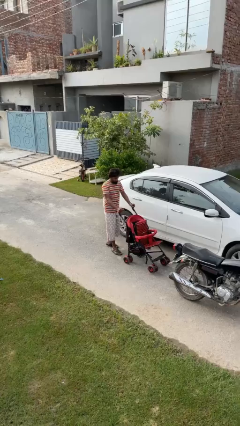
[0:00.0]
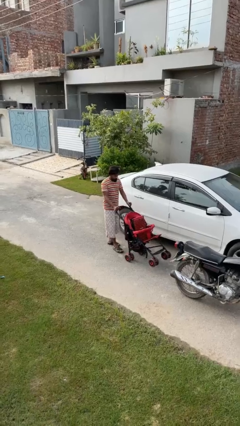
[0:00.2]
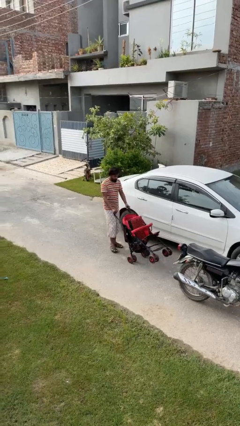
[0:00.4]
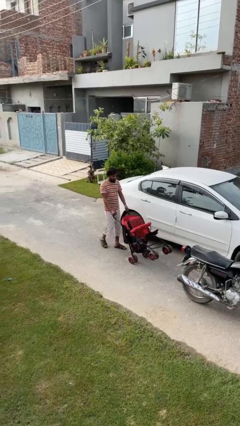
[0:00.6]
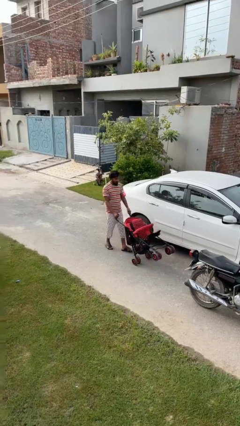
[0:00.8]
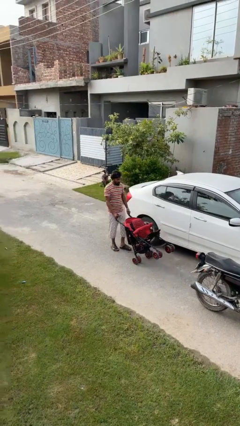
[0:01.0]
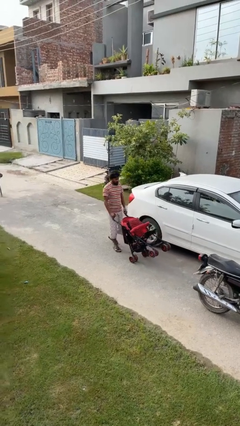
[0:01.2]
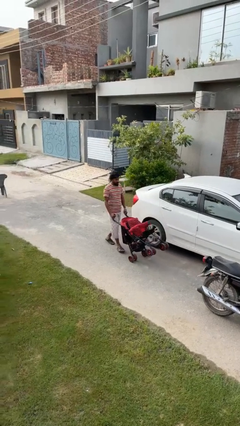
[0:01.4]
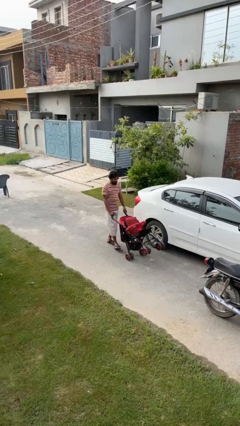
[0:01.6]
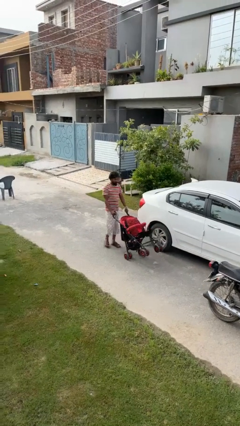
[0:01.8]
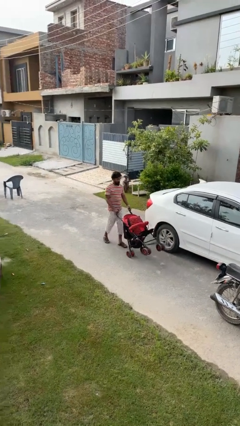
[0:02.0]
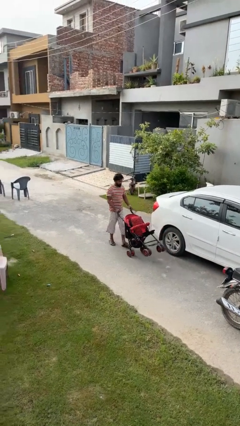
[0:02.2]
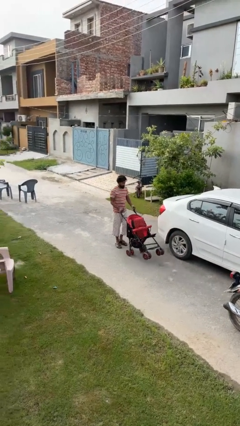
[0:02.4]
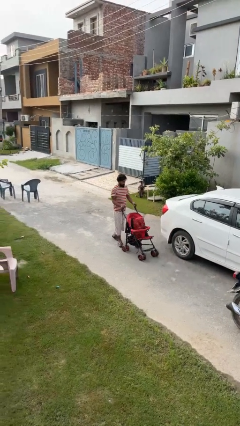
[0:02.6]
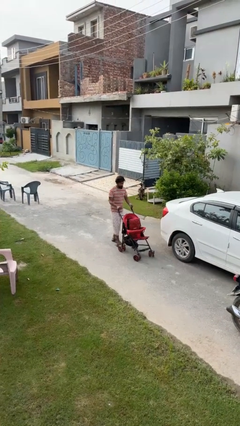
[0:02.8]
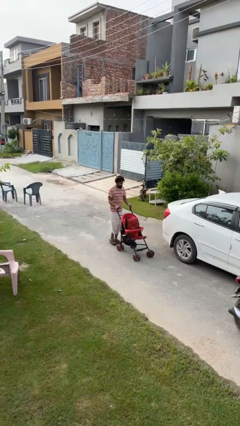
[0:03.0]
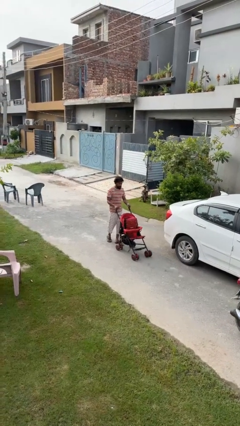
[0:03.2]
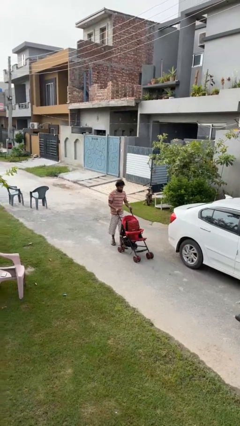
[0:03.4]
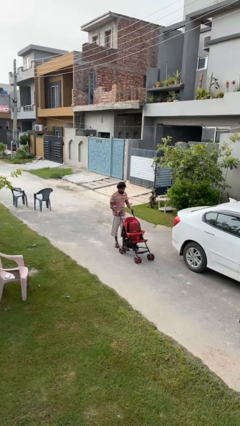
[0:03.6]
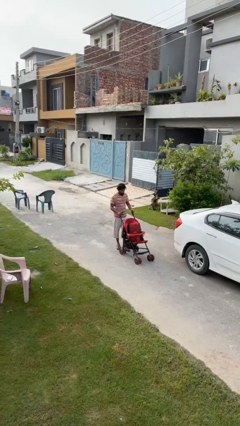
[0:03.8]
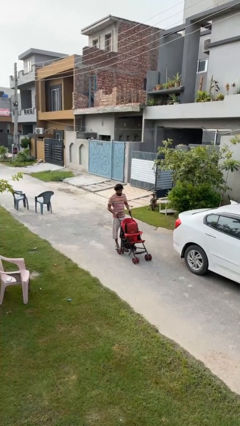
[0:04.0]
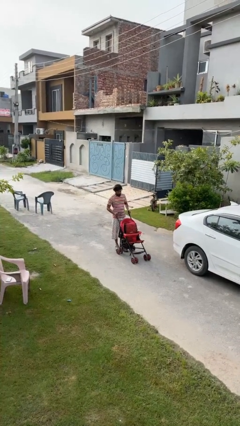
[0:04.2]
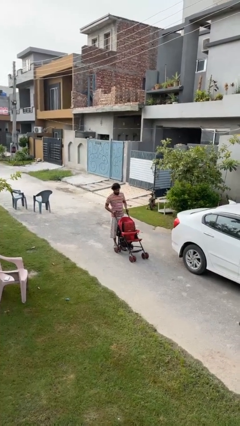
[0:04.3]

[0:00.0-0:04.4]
person pulls wheeled cart

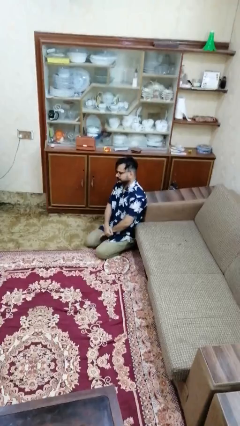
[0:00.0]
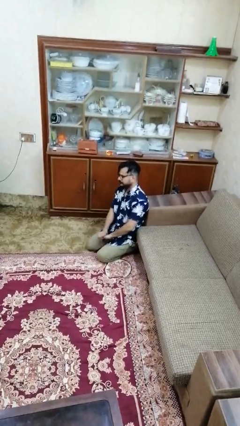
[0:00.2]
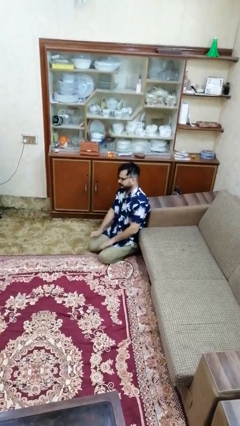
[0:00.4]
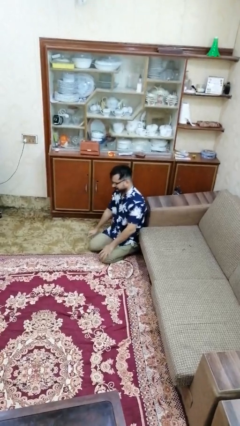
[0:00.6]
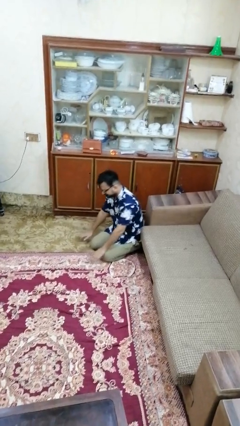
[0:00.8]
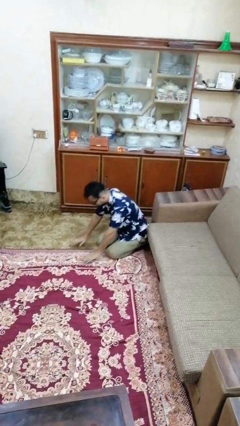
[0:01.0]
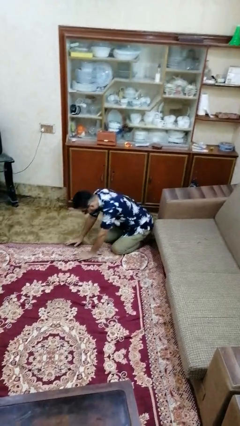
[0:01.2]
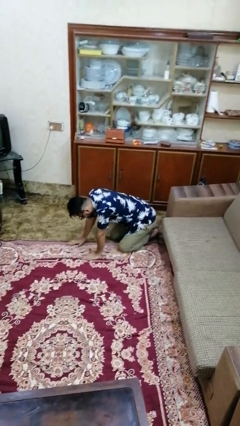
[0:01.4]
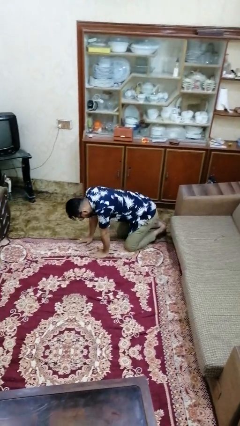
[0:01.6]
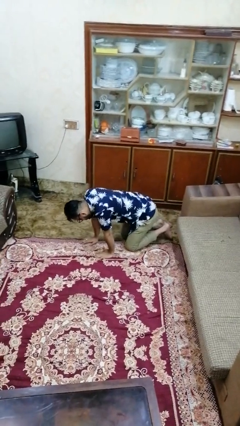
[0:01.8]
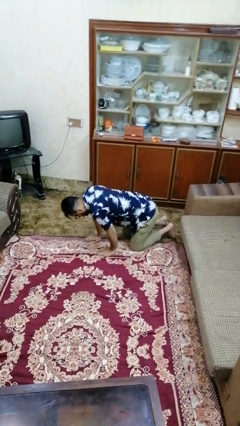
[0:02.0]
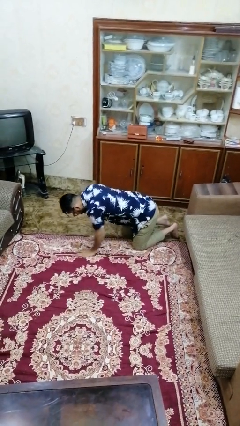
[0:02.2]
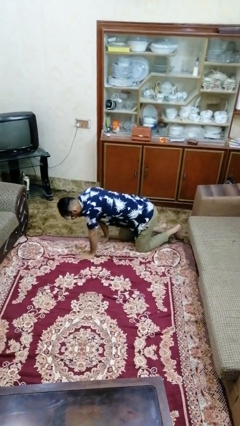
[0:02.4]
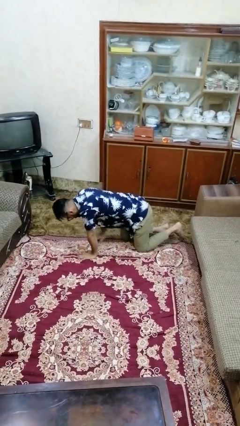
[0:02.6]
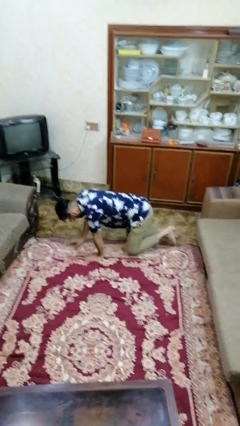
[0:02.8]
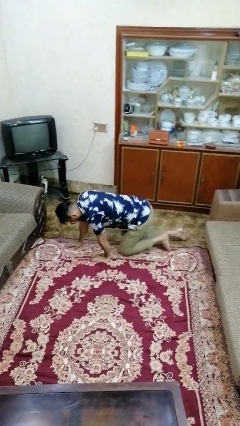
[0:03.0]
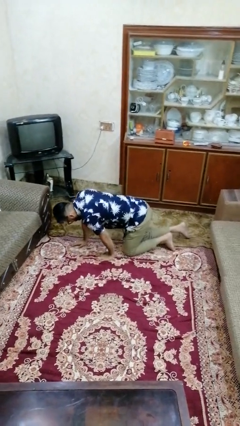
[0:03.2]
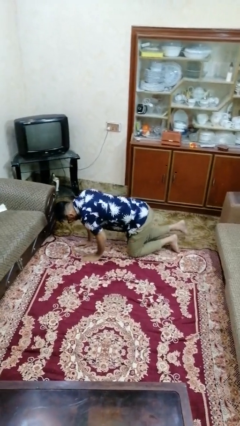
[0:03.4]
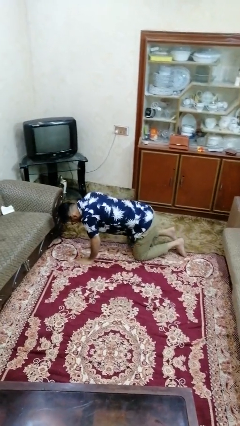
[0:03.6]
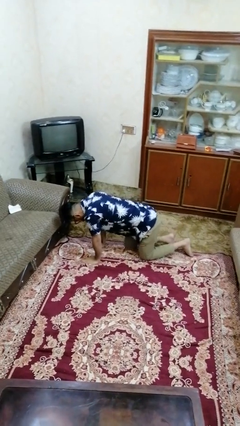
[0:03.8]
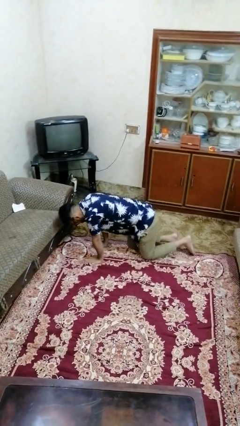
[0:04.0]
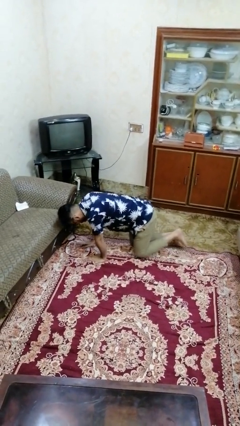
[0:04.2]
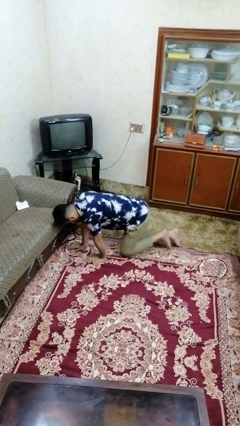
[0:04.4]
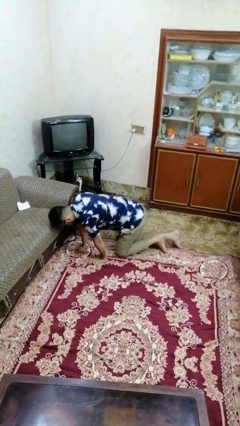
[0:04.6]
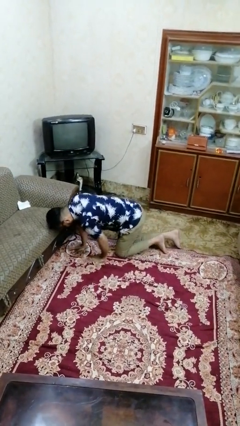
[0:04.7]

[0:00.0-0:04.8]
person crawls

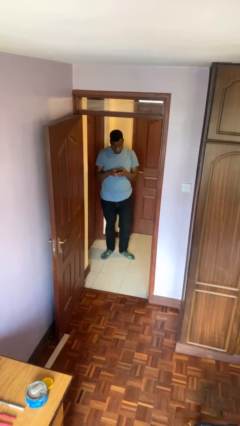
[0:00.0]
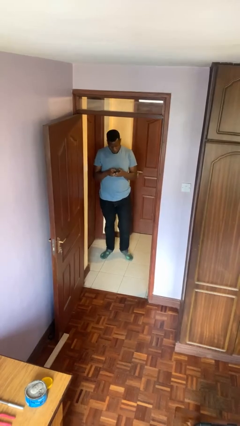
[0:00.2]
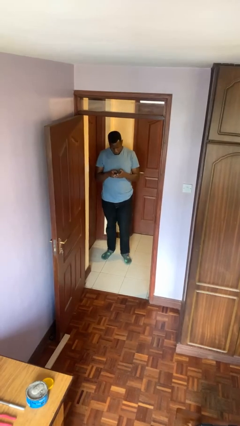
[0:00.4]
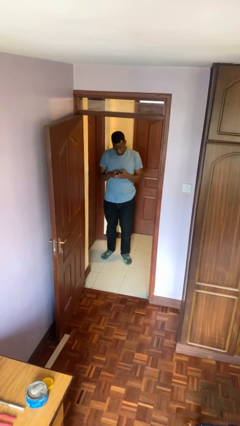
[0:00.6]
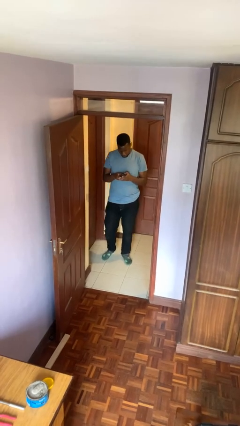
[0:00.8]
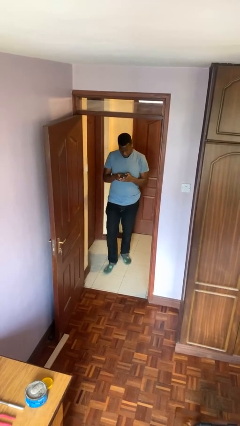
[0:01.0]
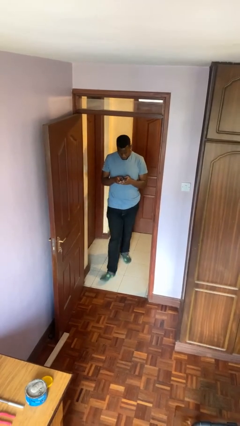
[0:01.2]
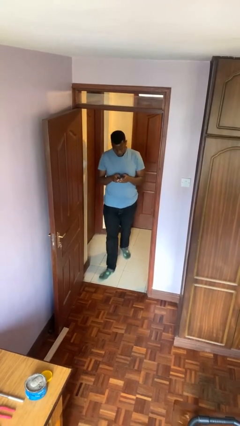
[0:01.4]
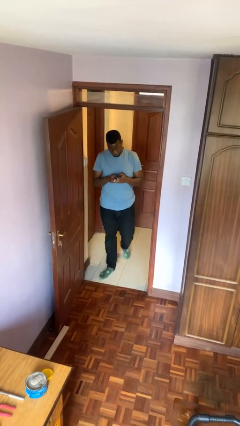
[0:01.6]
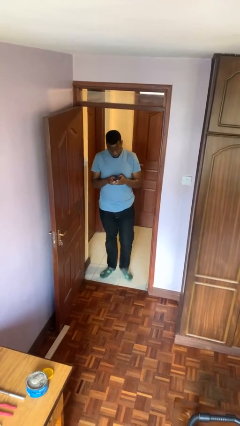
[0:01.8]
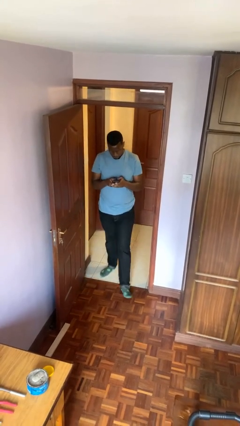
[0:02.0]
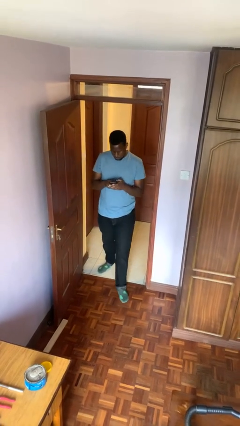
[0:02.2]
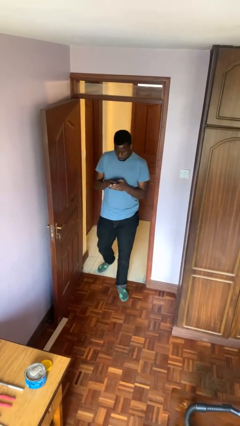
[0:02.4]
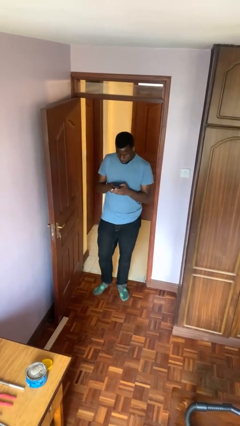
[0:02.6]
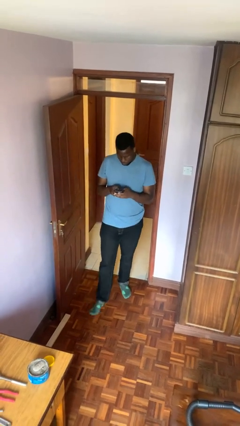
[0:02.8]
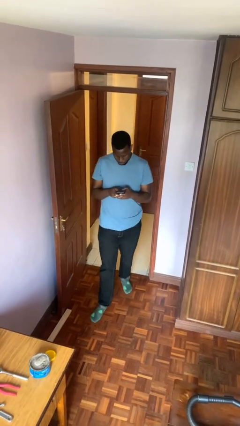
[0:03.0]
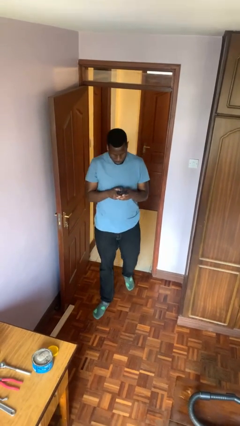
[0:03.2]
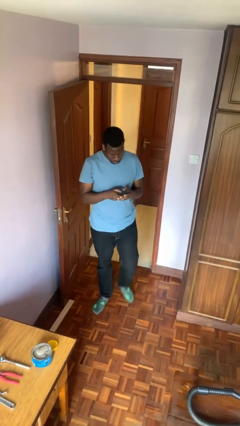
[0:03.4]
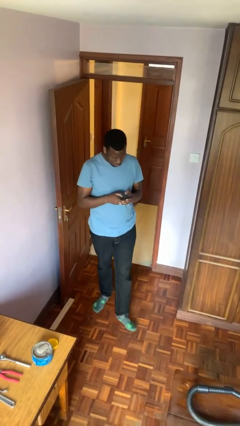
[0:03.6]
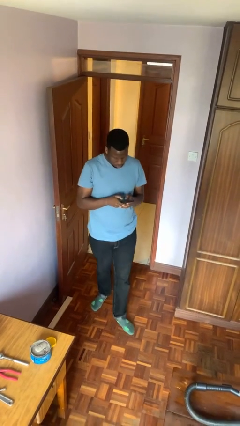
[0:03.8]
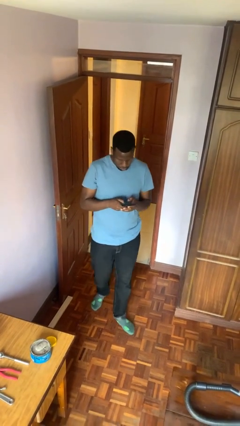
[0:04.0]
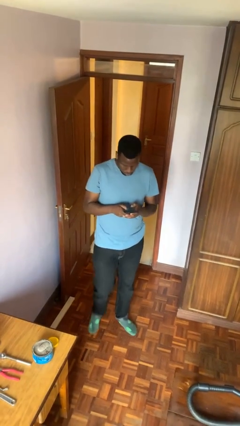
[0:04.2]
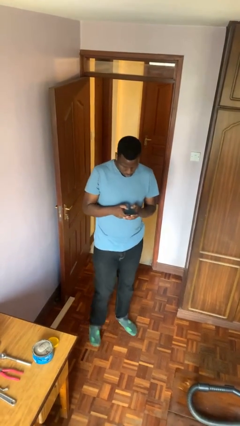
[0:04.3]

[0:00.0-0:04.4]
person enters scene through structure

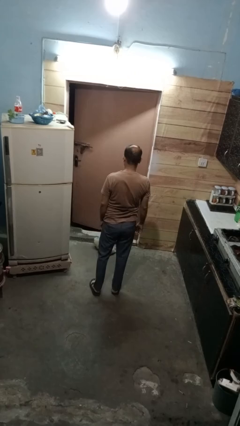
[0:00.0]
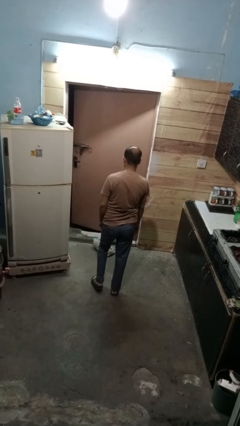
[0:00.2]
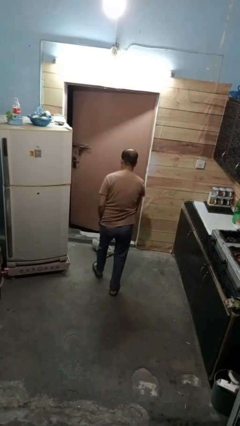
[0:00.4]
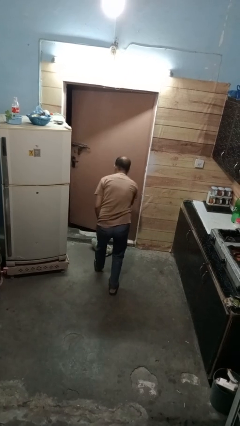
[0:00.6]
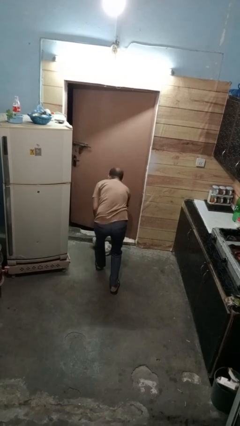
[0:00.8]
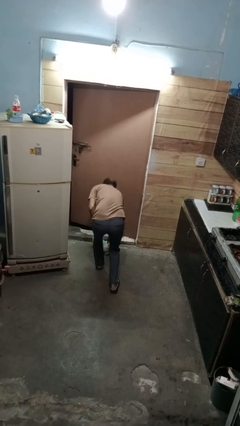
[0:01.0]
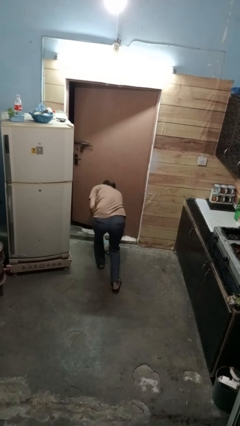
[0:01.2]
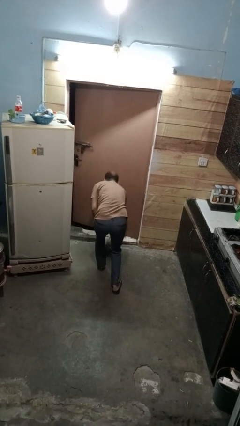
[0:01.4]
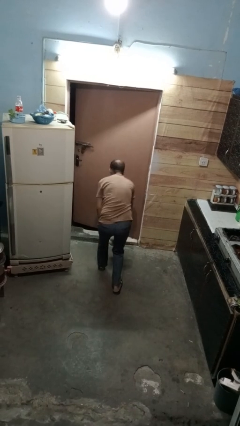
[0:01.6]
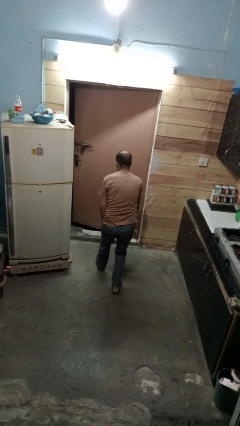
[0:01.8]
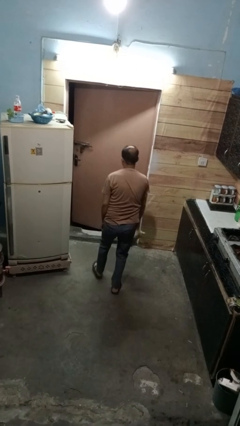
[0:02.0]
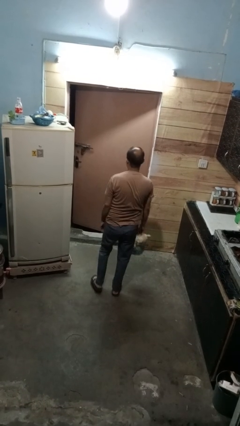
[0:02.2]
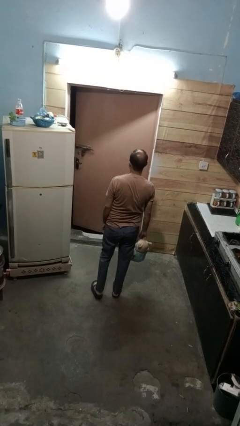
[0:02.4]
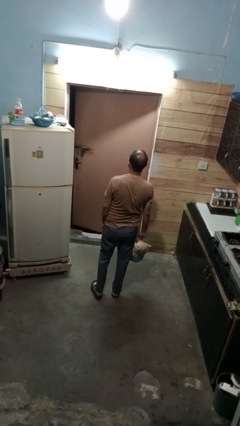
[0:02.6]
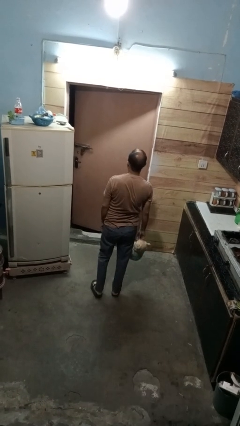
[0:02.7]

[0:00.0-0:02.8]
person picks up object from floor

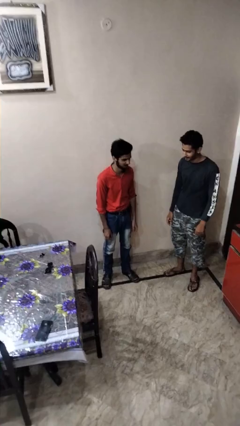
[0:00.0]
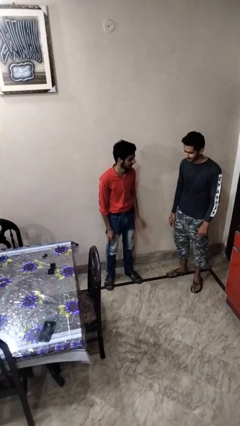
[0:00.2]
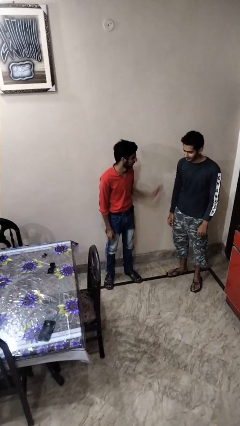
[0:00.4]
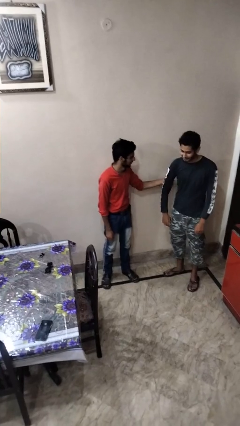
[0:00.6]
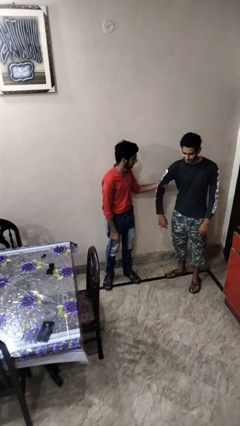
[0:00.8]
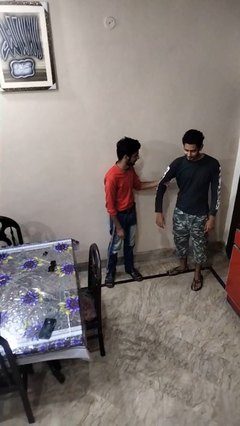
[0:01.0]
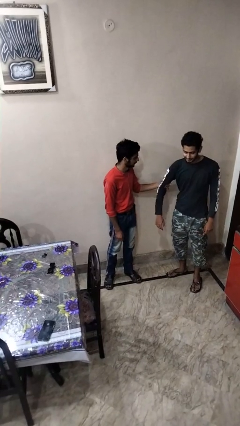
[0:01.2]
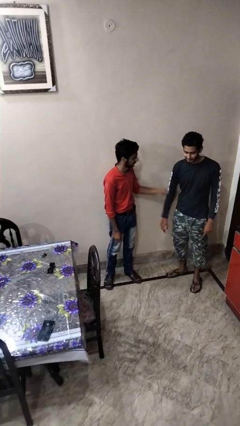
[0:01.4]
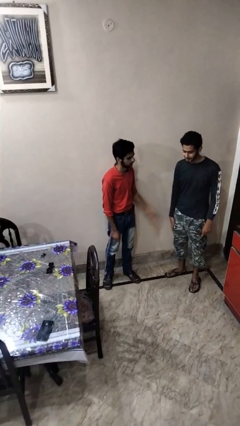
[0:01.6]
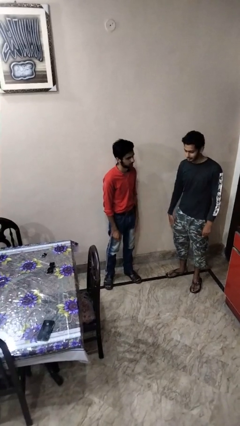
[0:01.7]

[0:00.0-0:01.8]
person grabs person by bicep
